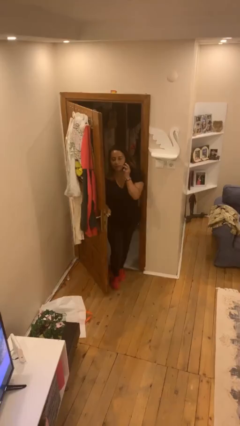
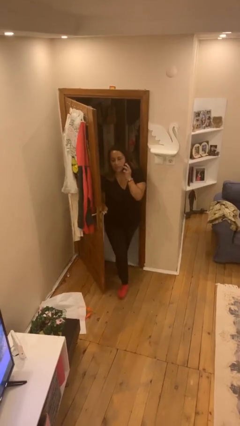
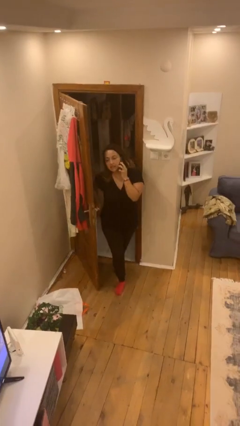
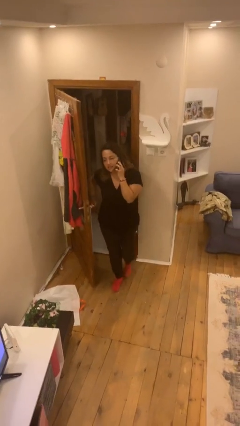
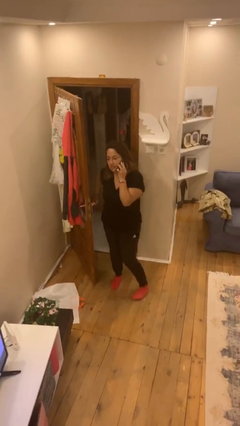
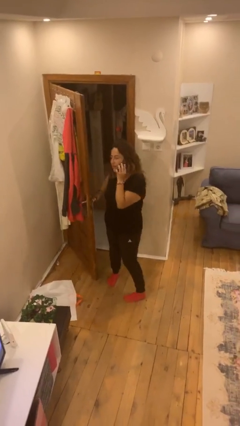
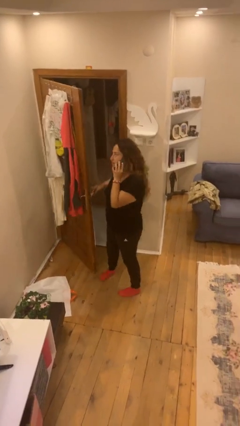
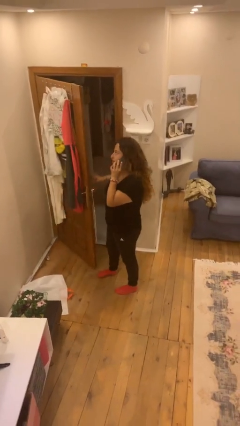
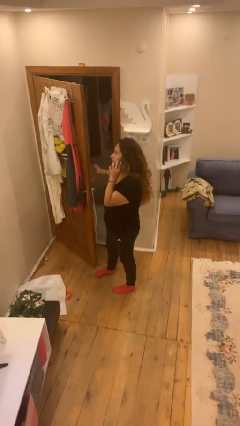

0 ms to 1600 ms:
person enters scene through structure

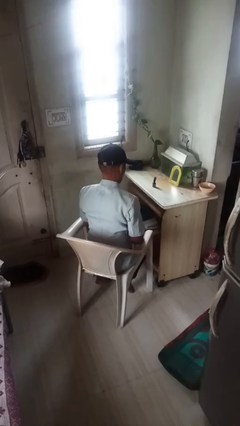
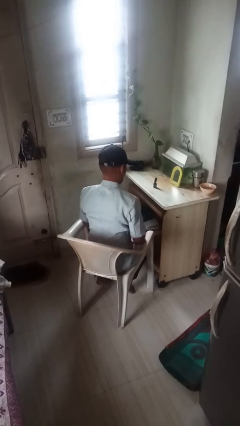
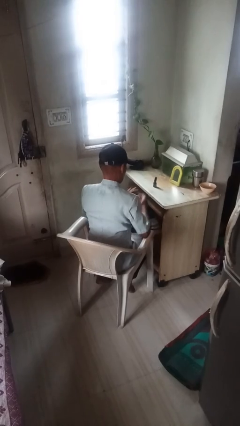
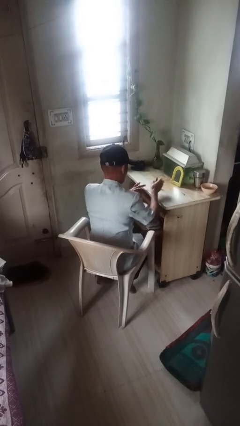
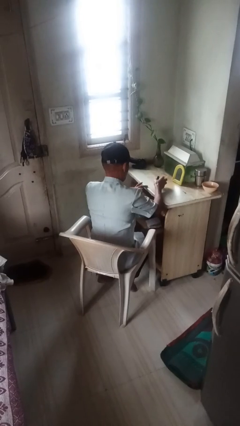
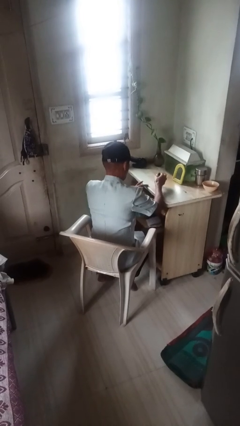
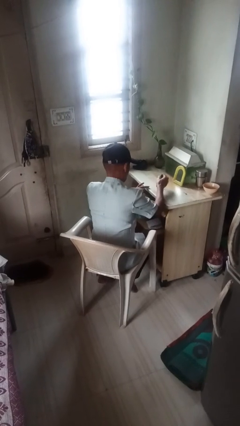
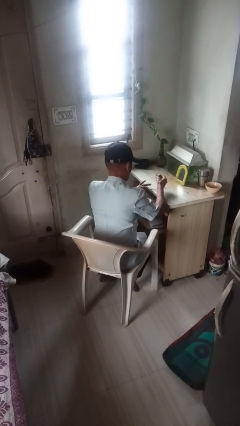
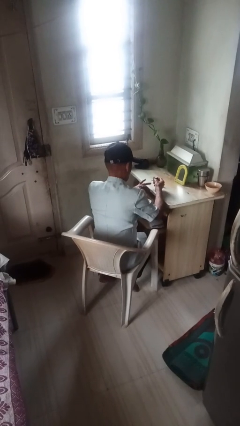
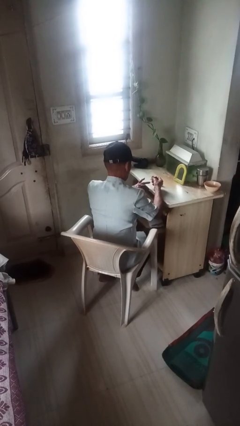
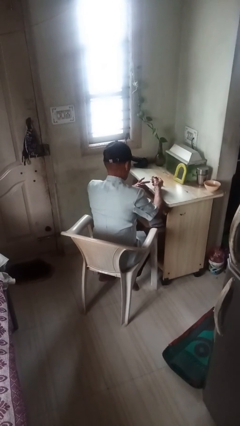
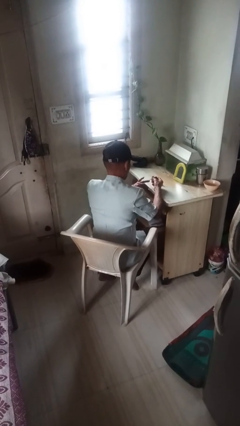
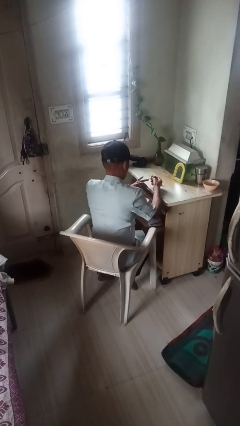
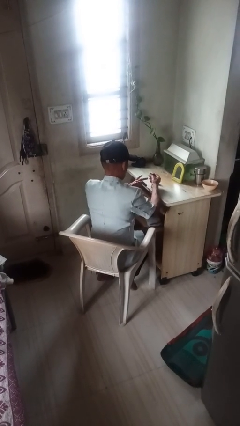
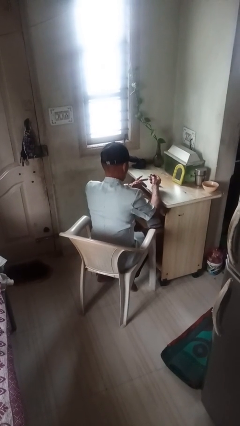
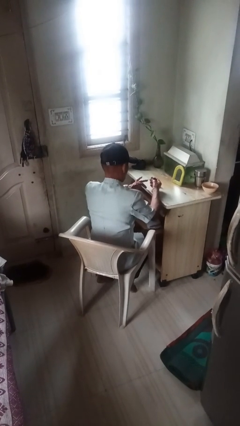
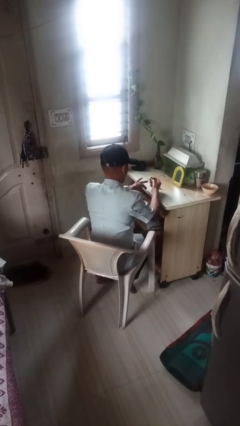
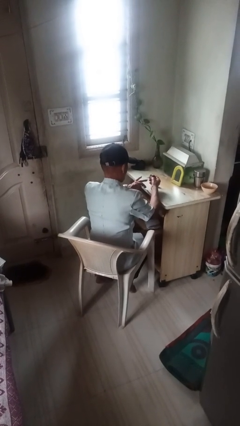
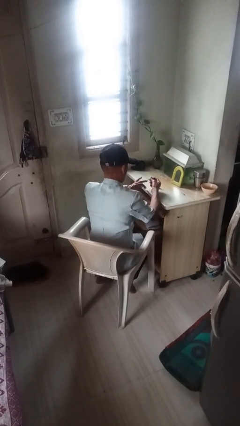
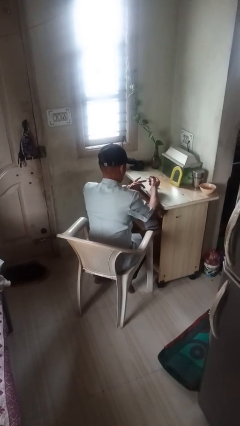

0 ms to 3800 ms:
person paints fingernails

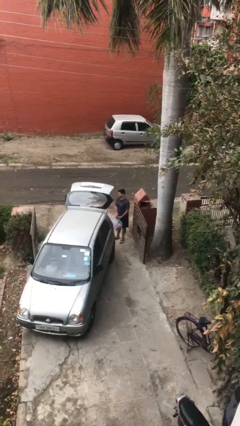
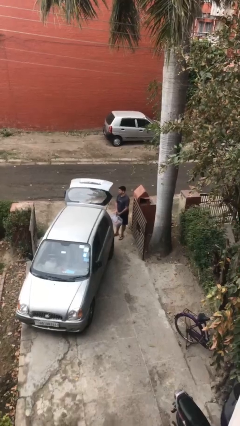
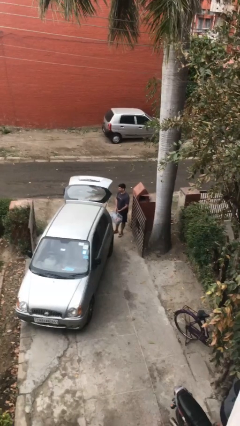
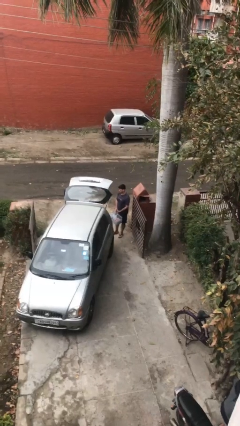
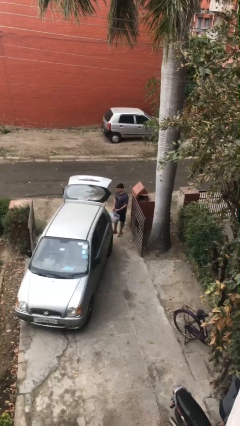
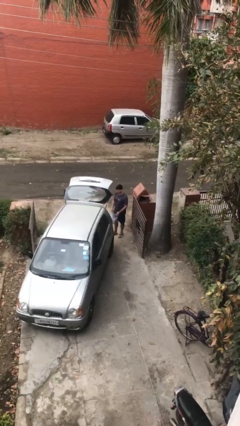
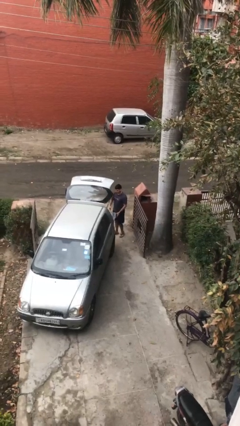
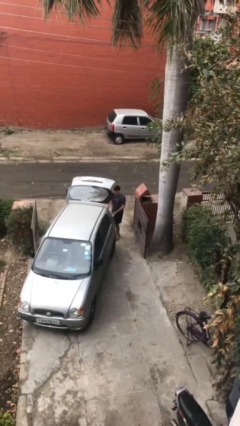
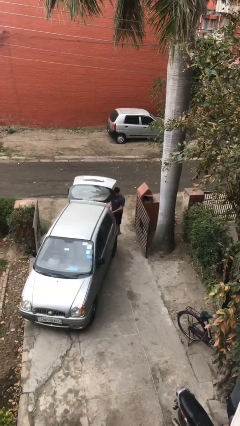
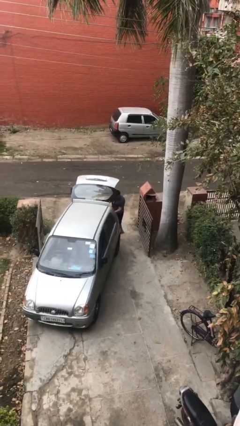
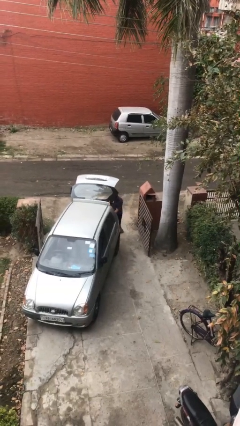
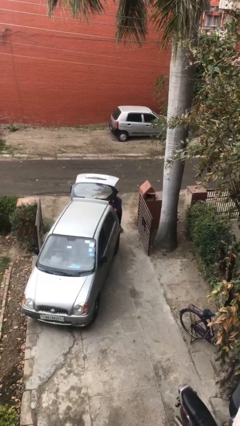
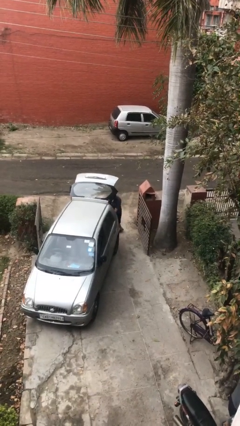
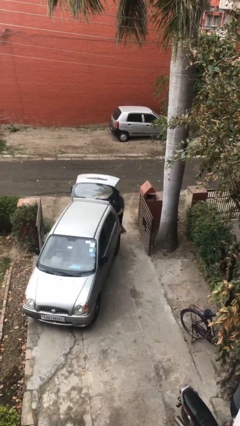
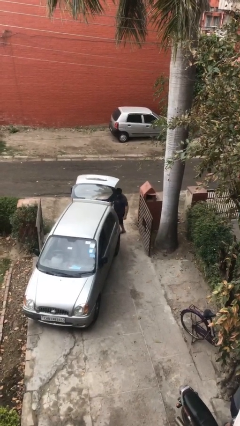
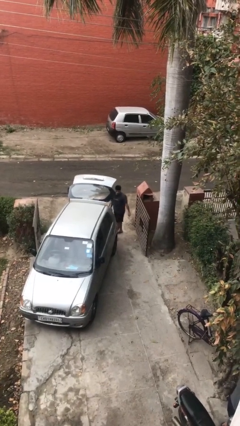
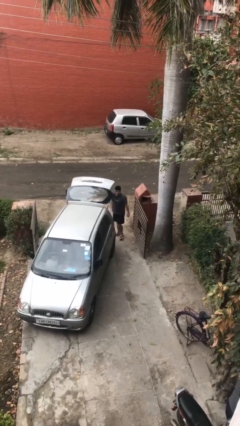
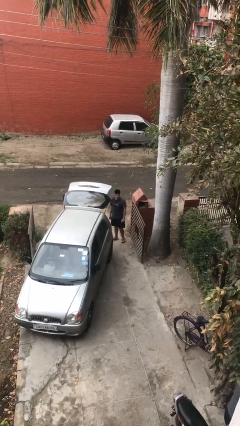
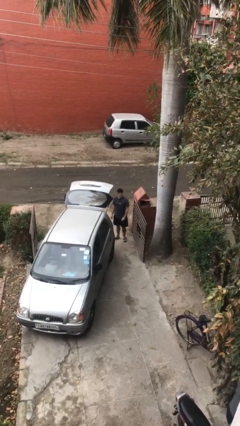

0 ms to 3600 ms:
person loads car

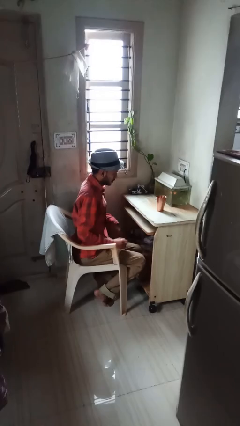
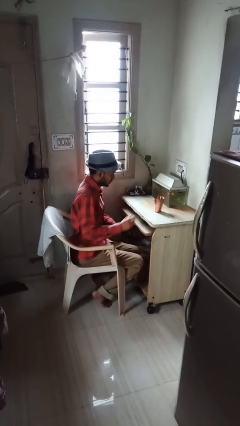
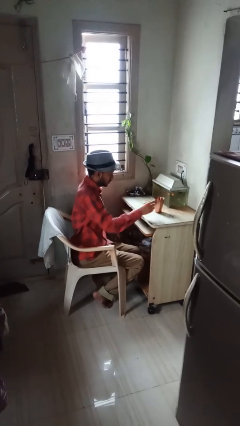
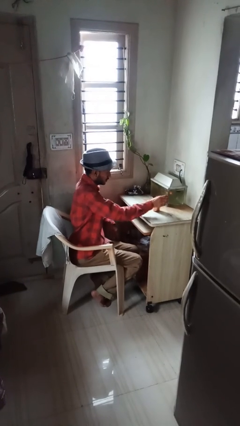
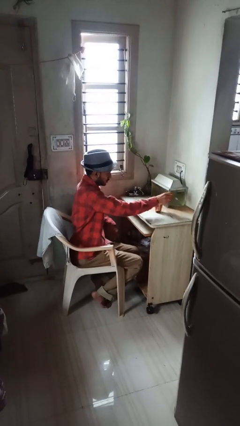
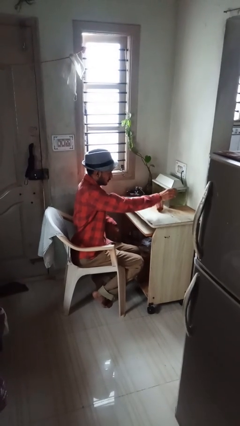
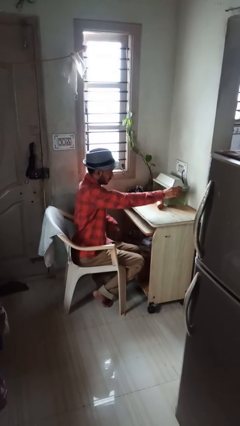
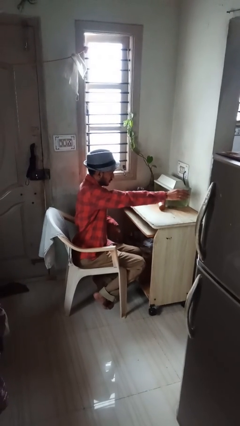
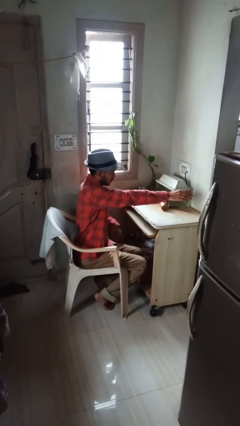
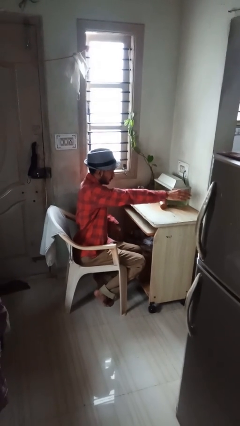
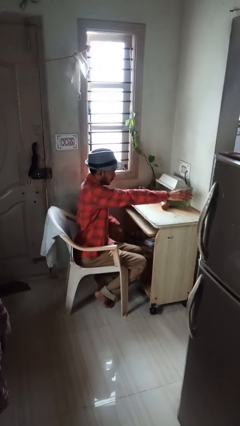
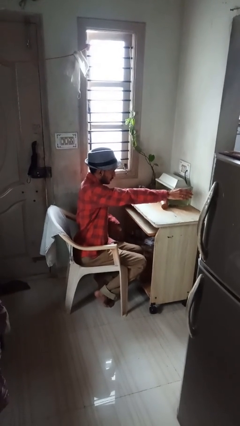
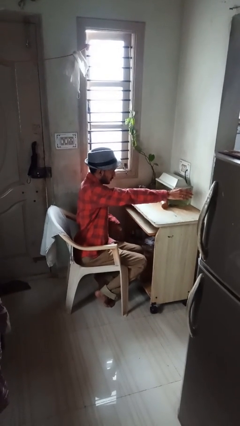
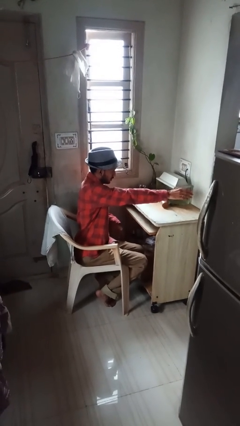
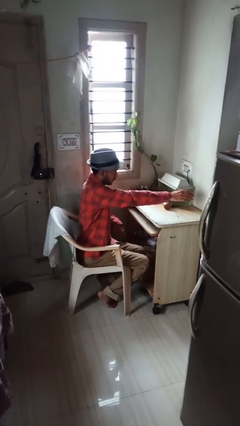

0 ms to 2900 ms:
person knocks over glass

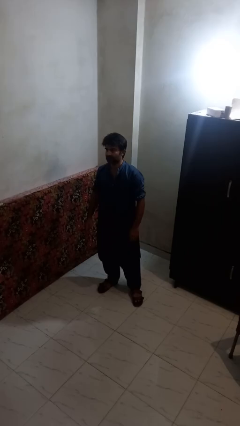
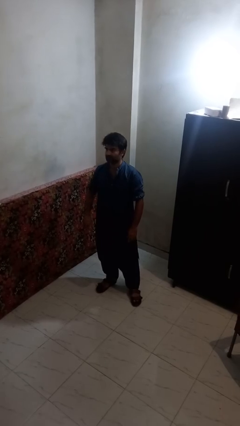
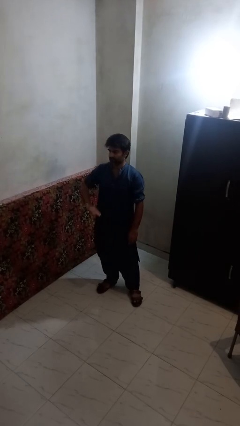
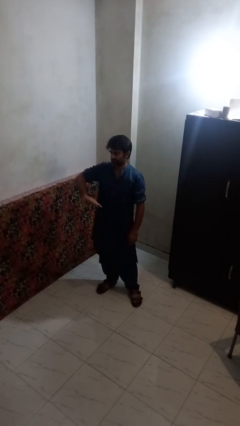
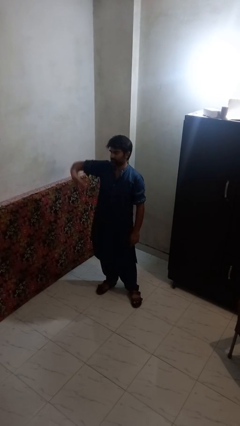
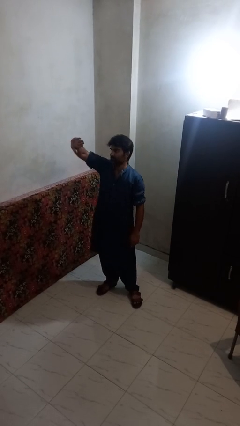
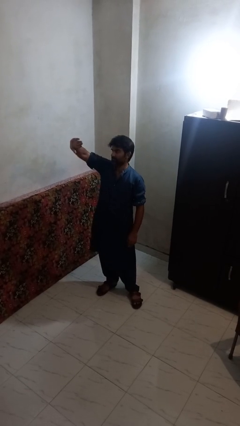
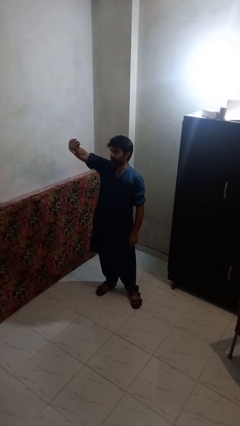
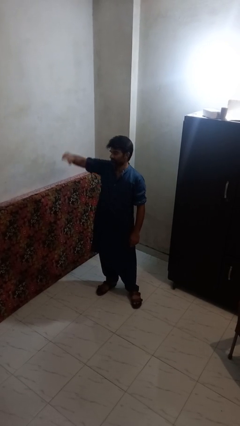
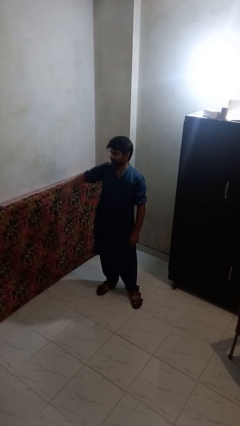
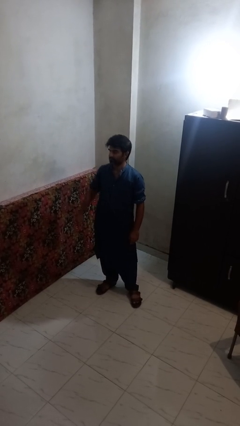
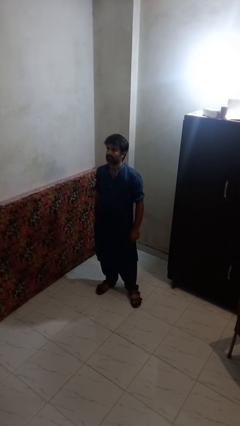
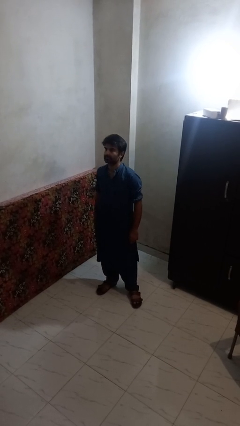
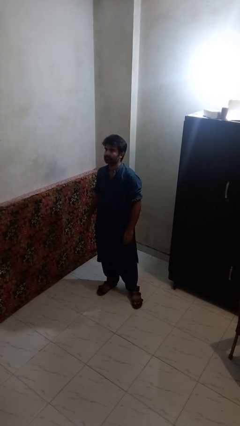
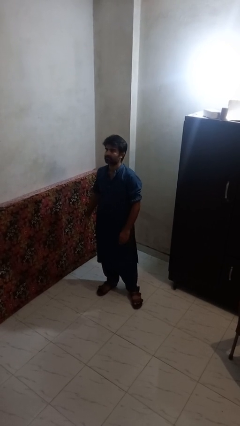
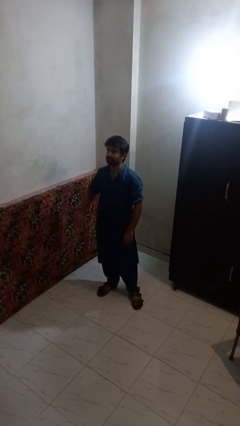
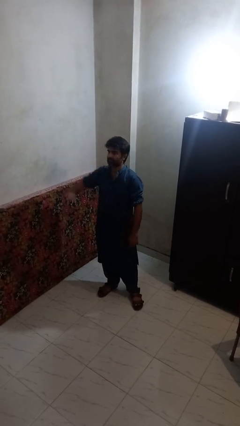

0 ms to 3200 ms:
person gestures swipe up

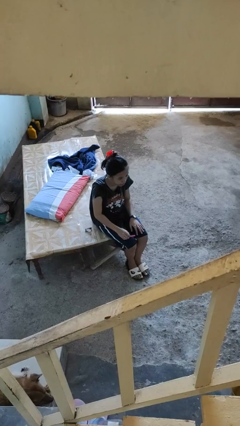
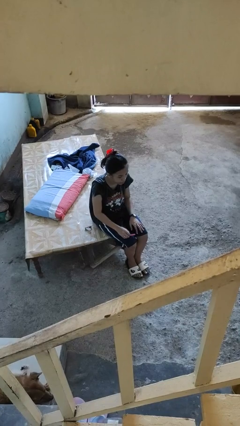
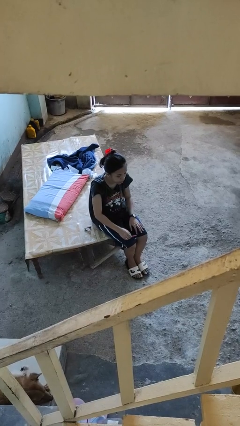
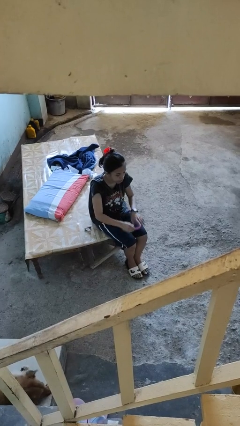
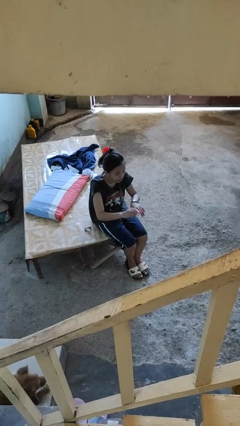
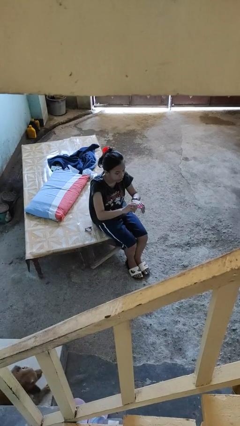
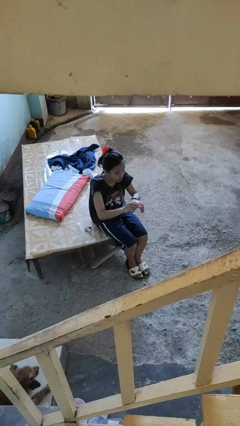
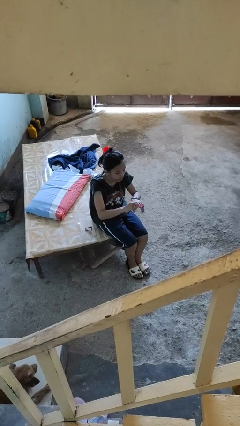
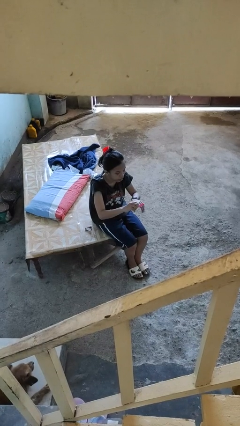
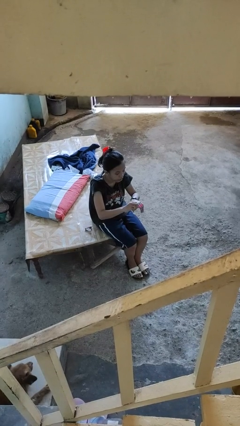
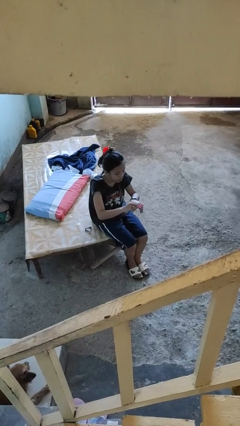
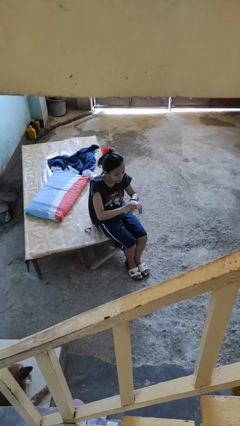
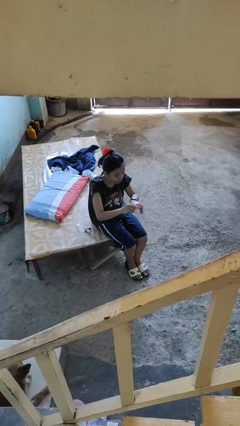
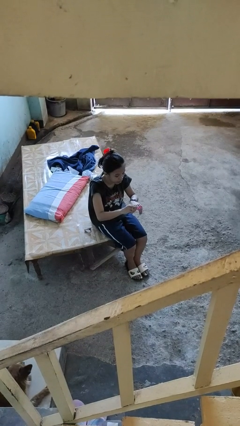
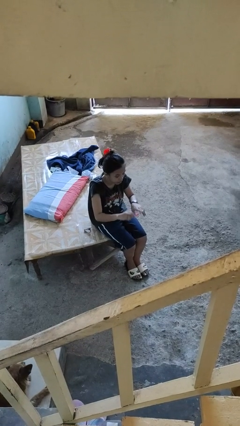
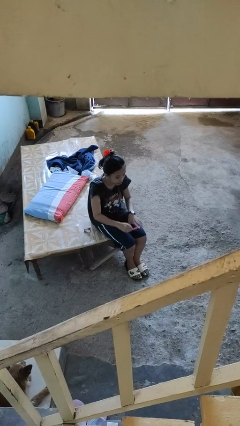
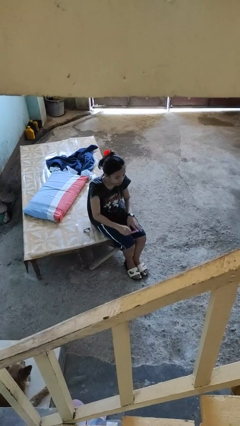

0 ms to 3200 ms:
person files fingernails
